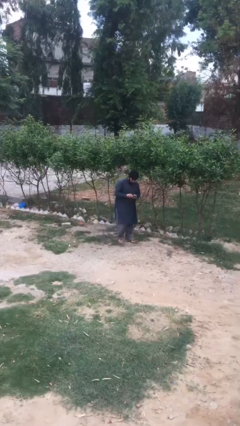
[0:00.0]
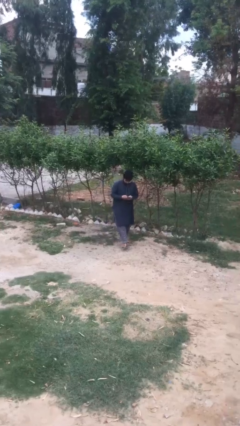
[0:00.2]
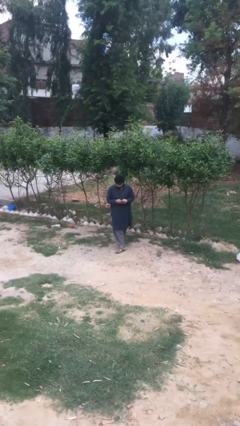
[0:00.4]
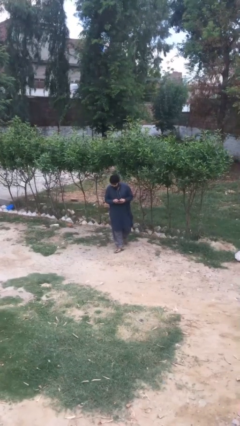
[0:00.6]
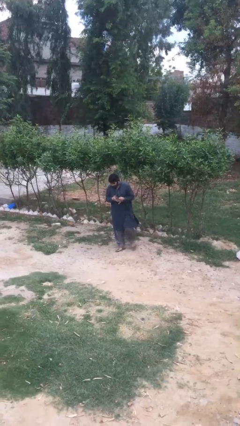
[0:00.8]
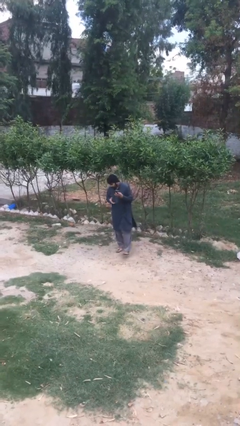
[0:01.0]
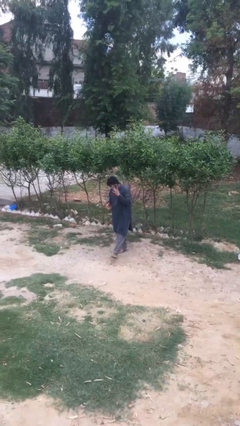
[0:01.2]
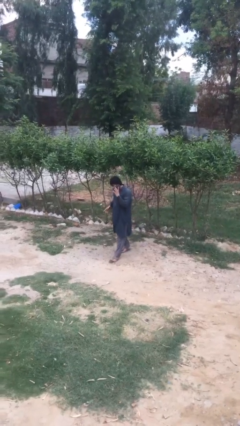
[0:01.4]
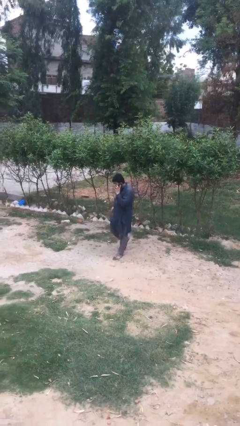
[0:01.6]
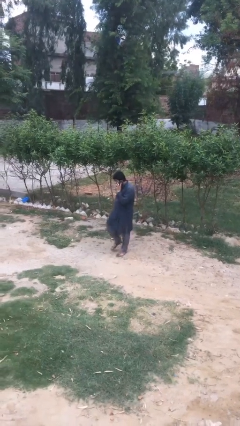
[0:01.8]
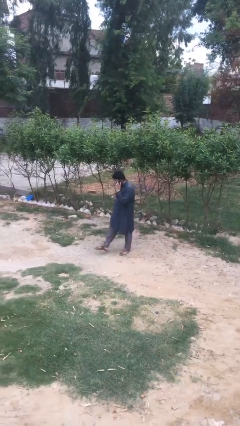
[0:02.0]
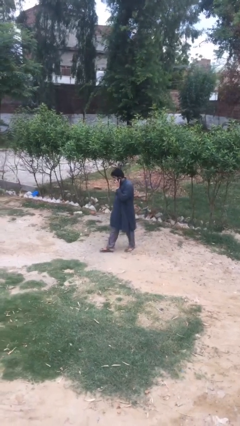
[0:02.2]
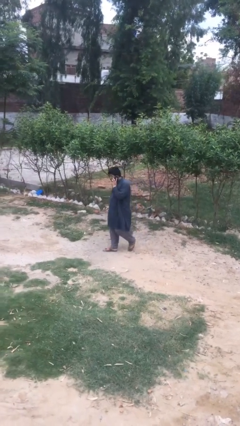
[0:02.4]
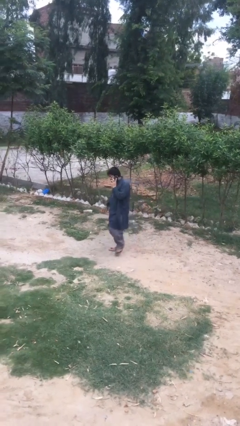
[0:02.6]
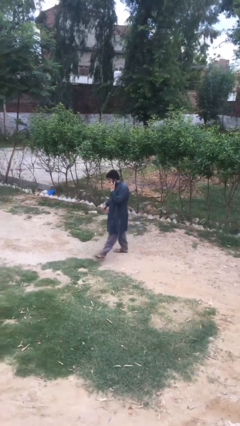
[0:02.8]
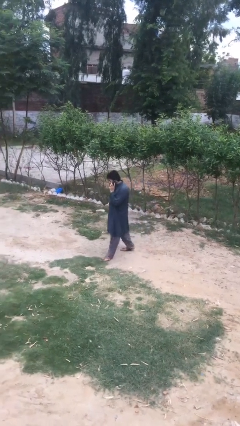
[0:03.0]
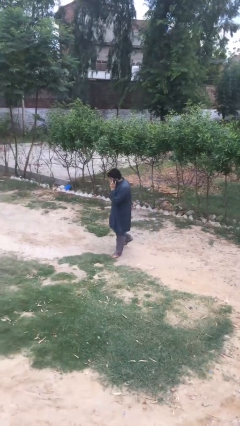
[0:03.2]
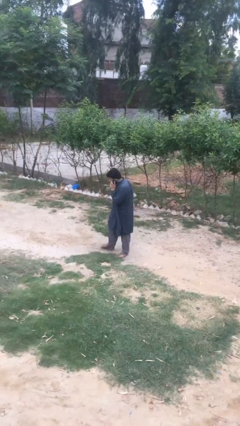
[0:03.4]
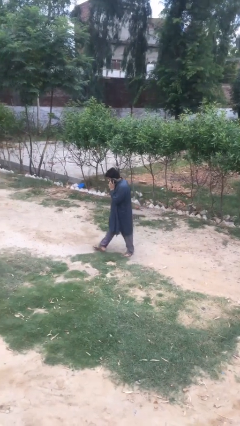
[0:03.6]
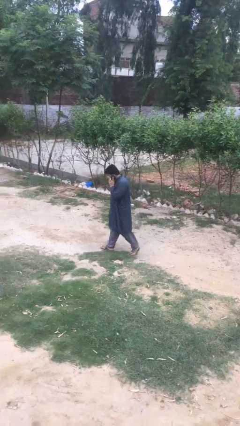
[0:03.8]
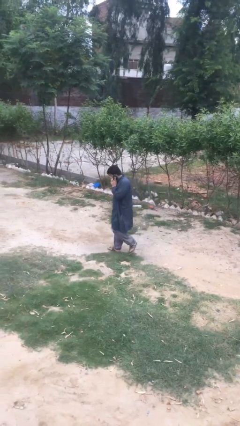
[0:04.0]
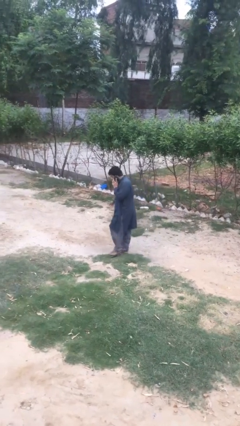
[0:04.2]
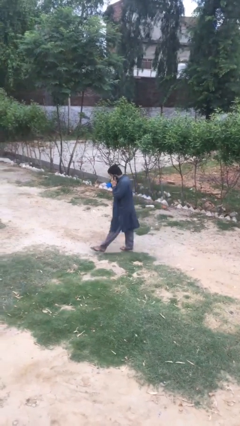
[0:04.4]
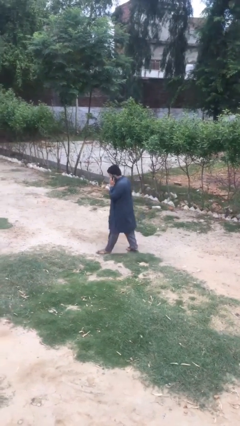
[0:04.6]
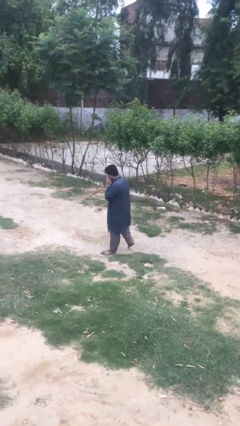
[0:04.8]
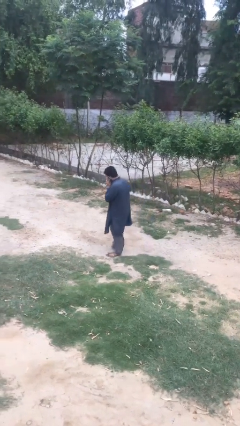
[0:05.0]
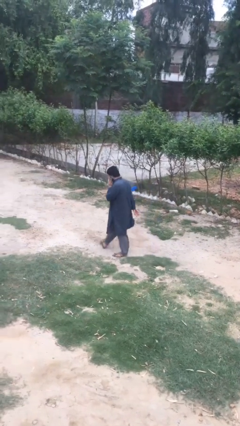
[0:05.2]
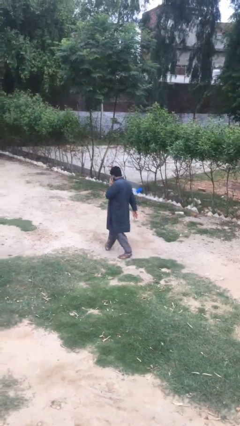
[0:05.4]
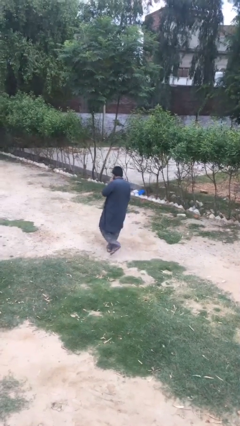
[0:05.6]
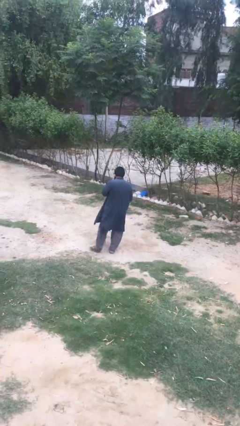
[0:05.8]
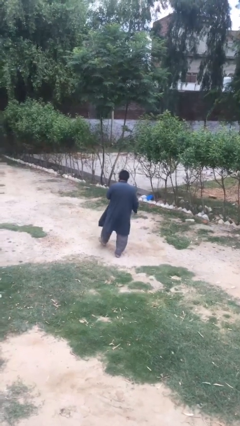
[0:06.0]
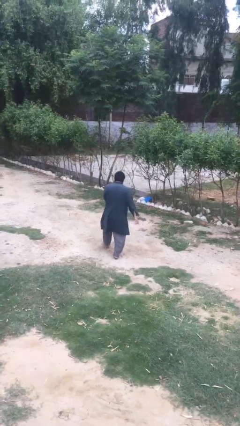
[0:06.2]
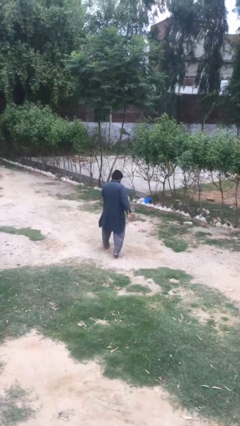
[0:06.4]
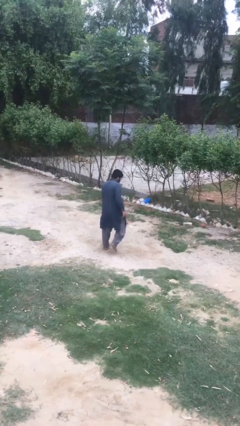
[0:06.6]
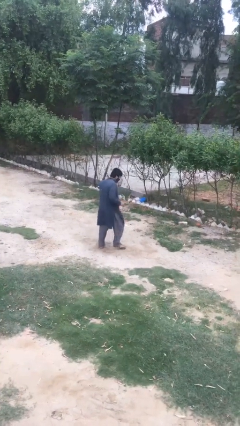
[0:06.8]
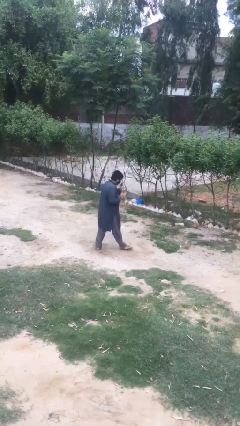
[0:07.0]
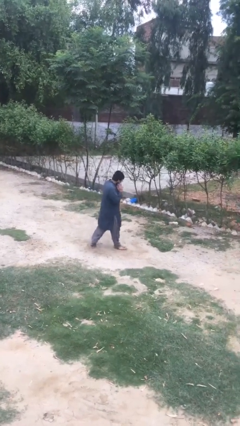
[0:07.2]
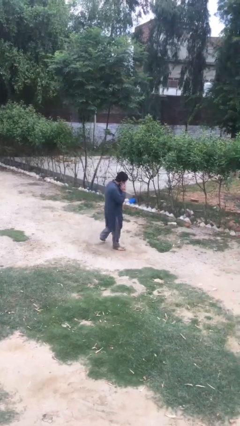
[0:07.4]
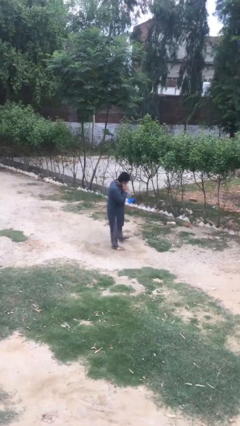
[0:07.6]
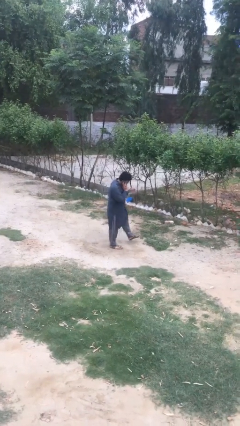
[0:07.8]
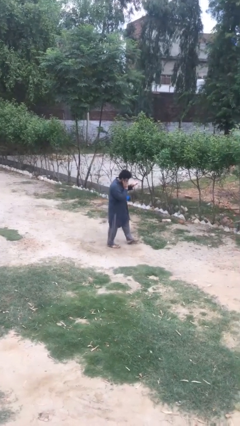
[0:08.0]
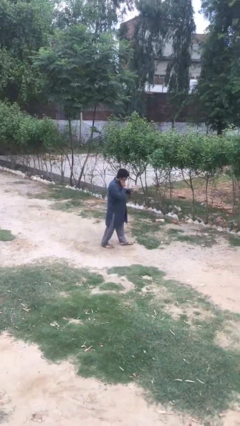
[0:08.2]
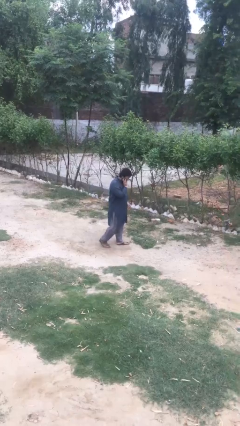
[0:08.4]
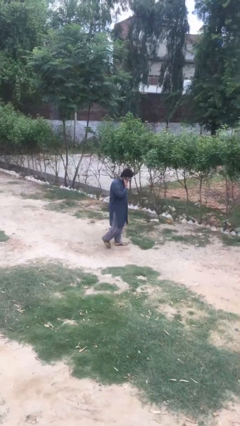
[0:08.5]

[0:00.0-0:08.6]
person talks on phone

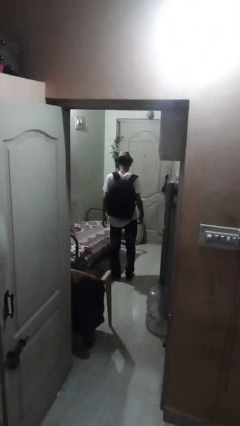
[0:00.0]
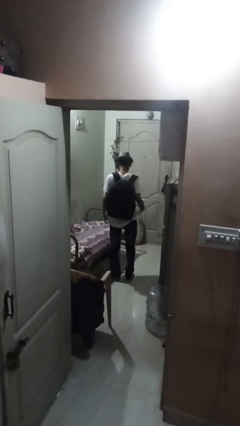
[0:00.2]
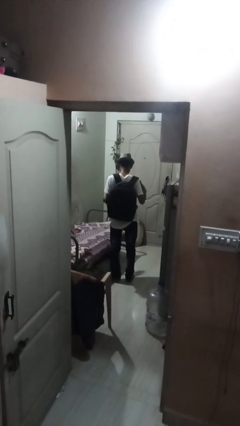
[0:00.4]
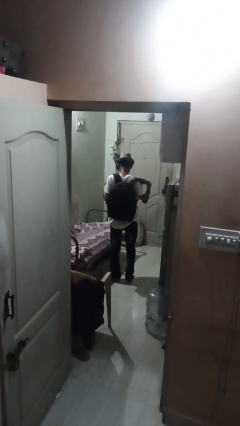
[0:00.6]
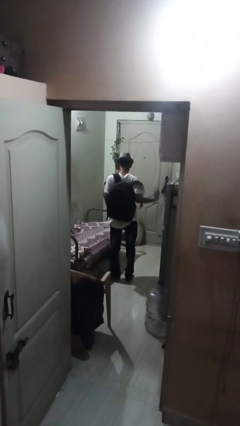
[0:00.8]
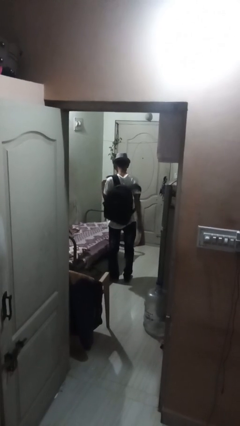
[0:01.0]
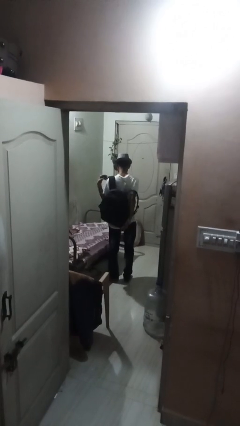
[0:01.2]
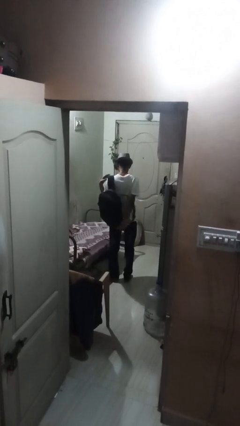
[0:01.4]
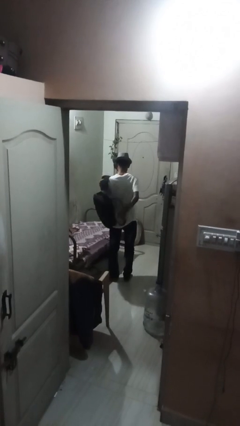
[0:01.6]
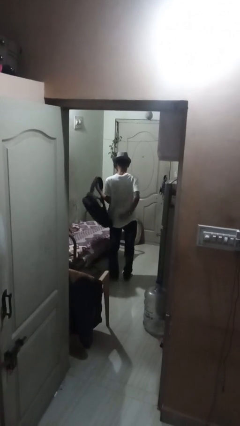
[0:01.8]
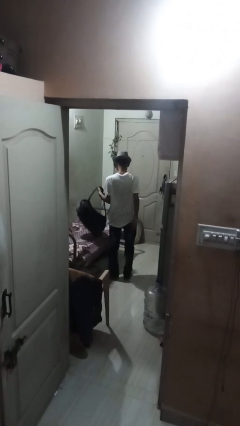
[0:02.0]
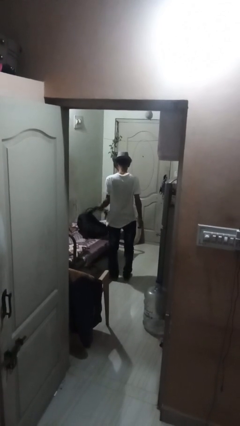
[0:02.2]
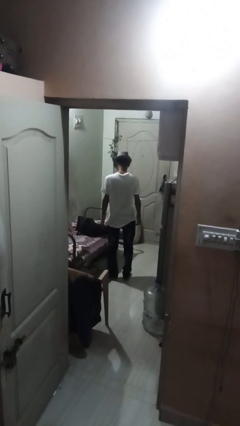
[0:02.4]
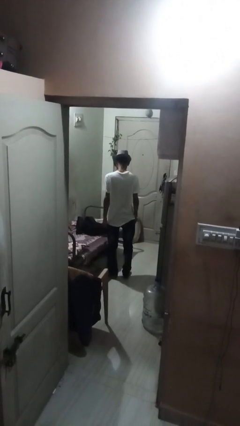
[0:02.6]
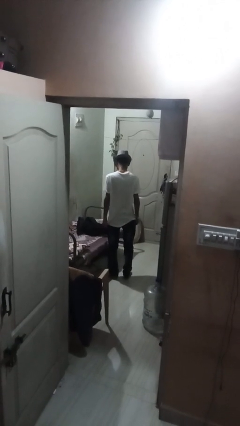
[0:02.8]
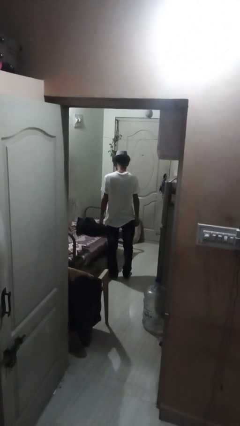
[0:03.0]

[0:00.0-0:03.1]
person takes off backpack

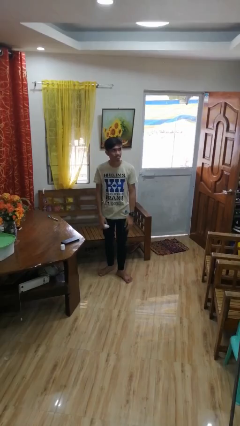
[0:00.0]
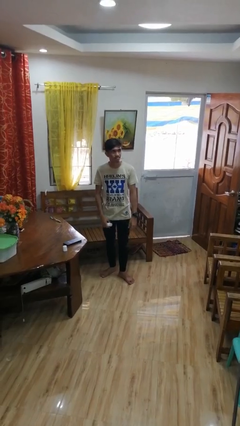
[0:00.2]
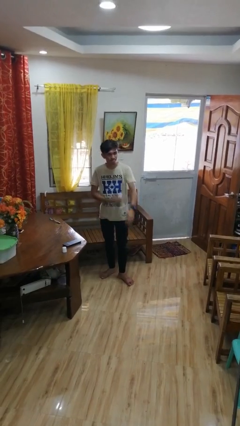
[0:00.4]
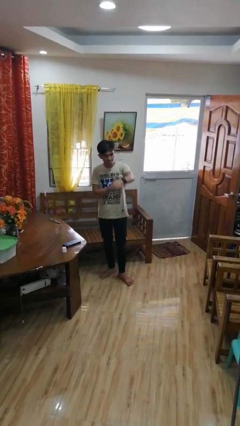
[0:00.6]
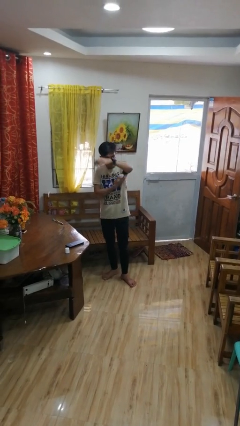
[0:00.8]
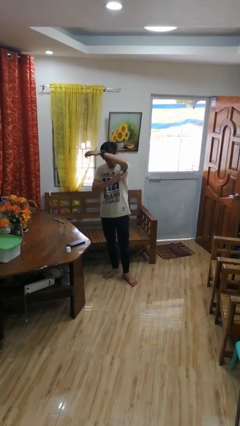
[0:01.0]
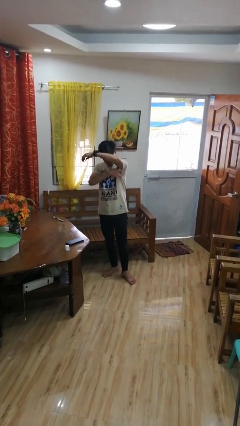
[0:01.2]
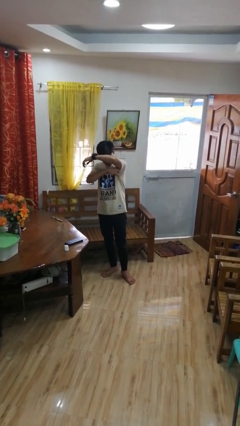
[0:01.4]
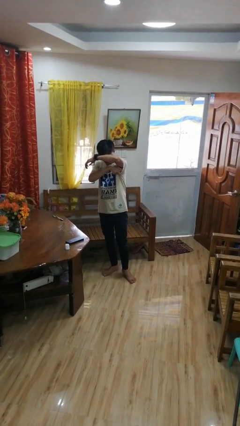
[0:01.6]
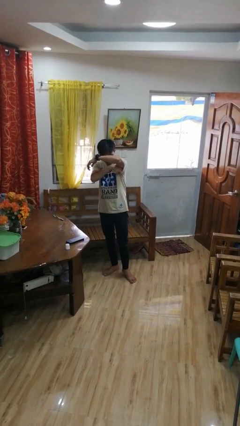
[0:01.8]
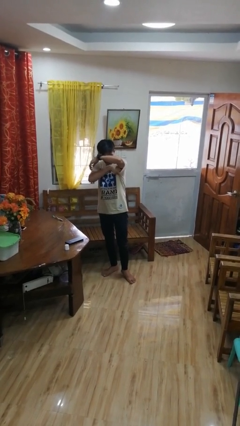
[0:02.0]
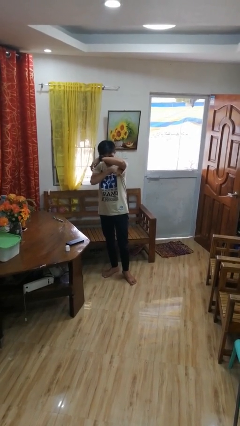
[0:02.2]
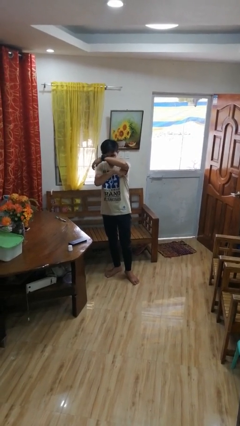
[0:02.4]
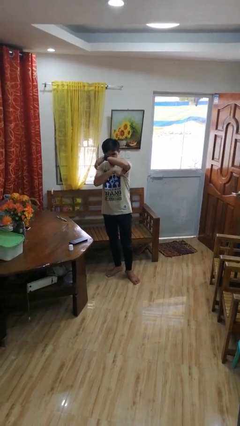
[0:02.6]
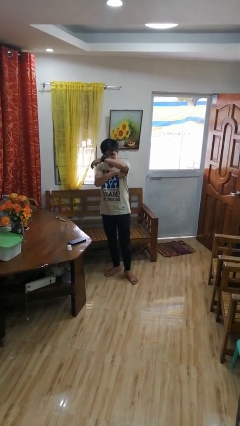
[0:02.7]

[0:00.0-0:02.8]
person applies deodorant

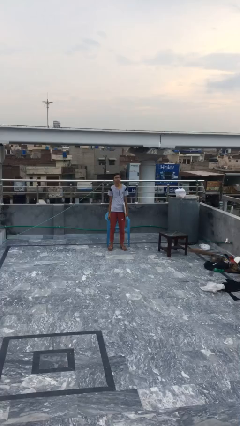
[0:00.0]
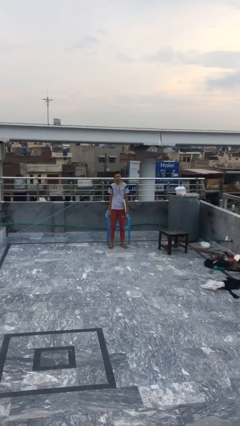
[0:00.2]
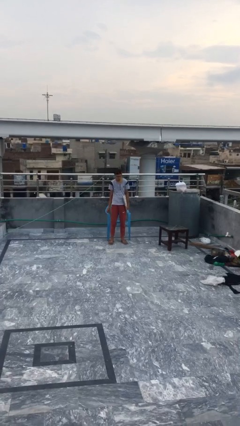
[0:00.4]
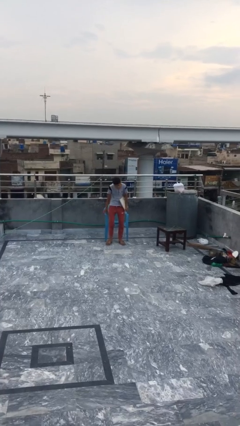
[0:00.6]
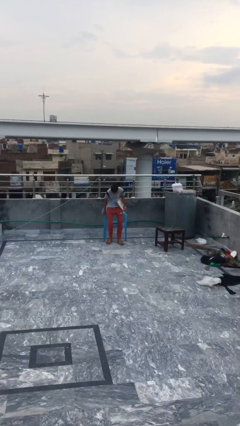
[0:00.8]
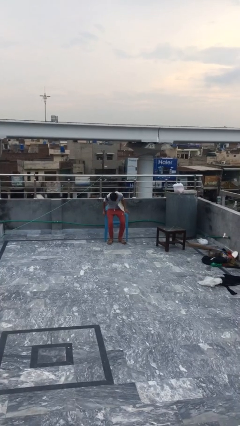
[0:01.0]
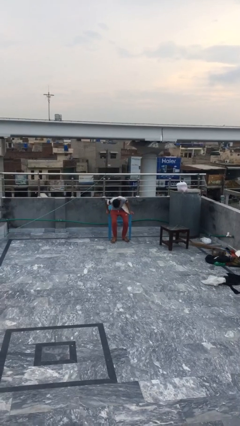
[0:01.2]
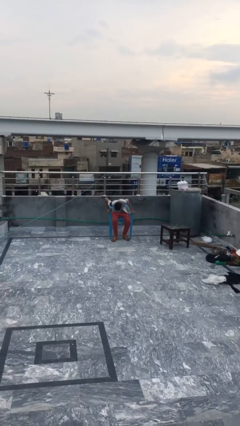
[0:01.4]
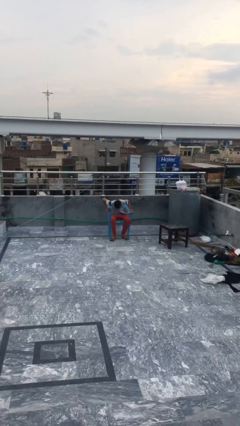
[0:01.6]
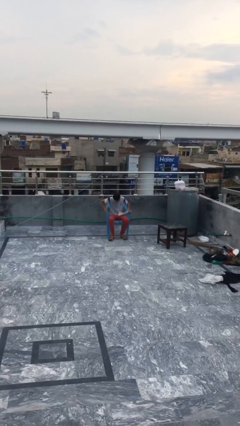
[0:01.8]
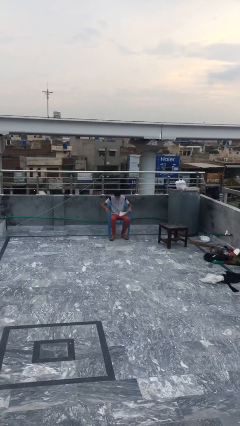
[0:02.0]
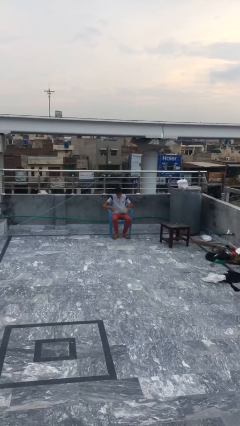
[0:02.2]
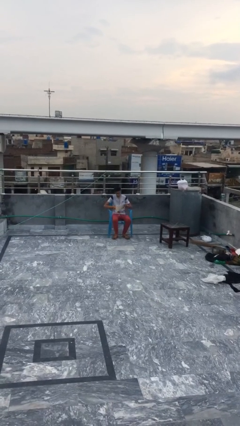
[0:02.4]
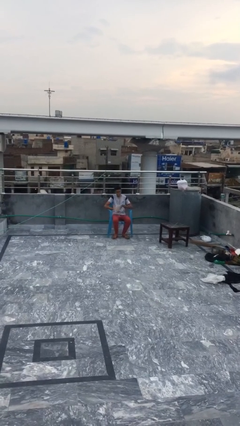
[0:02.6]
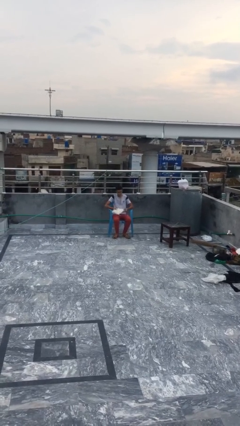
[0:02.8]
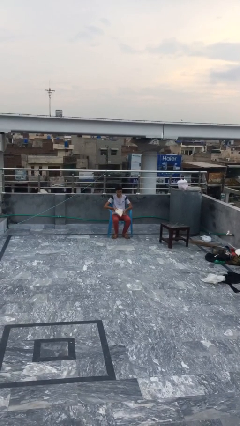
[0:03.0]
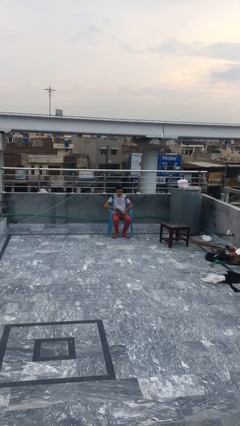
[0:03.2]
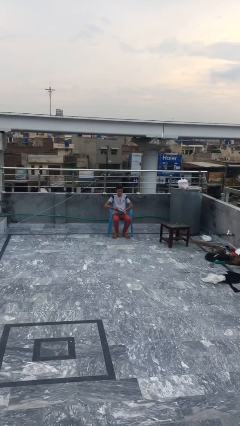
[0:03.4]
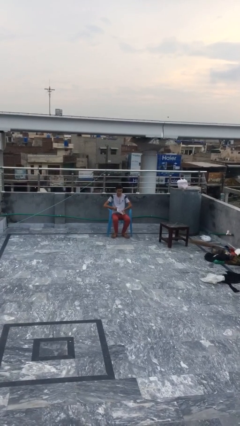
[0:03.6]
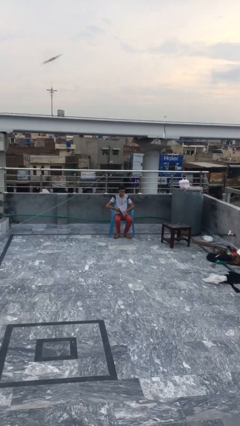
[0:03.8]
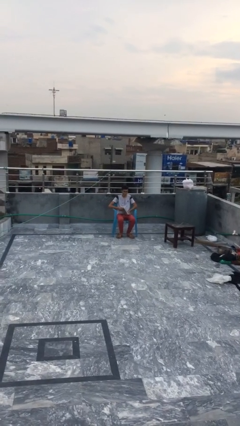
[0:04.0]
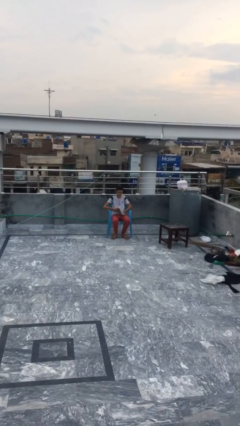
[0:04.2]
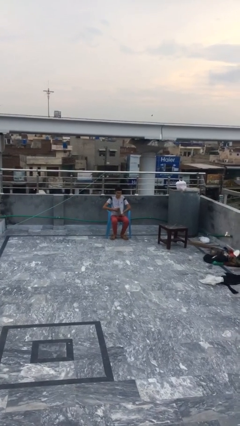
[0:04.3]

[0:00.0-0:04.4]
person sits down
